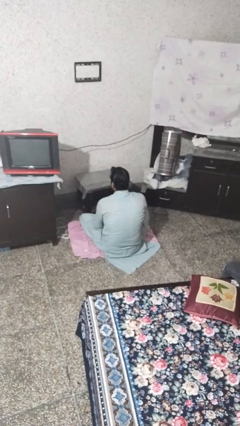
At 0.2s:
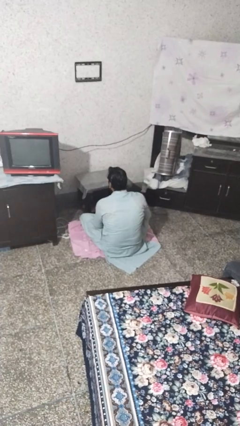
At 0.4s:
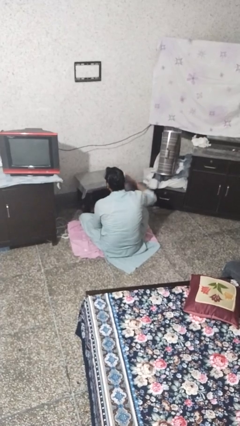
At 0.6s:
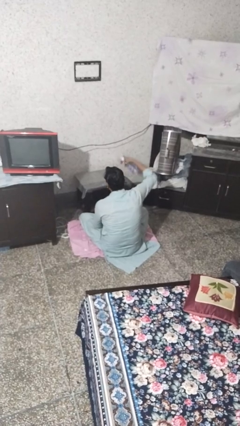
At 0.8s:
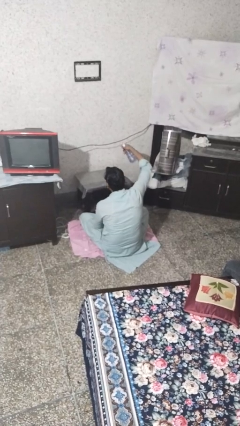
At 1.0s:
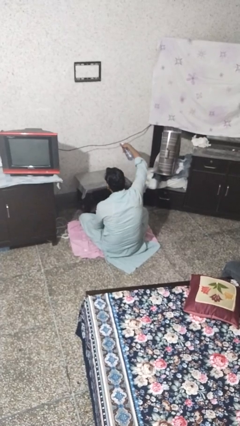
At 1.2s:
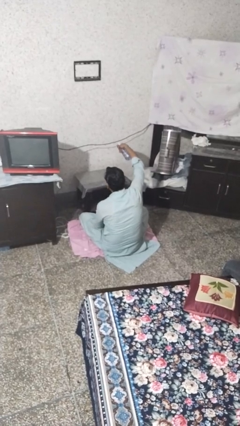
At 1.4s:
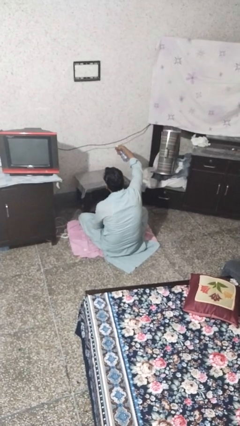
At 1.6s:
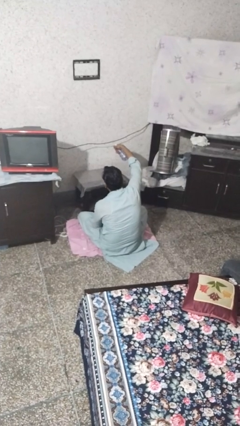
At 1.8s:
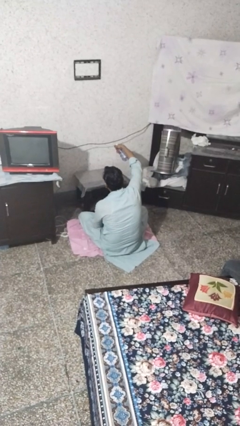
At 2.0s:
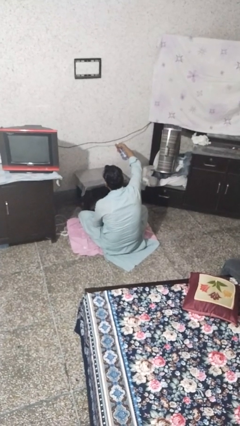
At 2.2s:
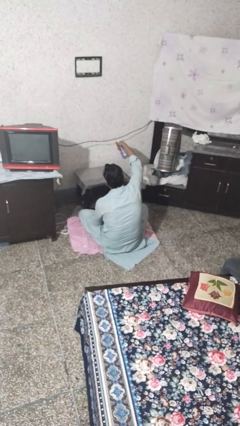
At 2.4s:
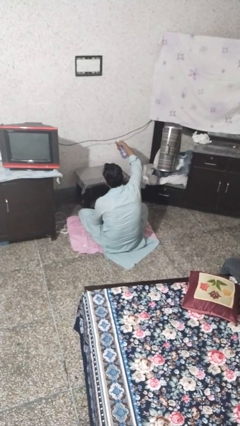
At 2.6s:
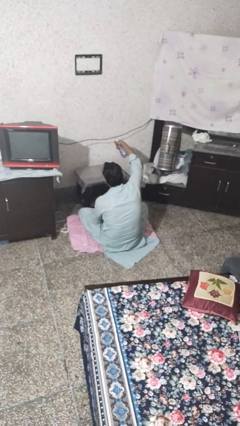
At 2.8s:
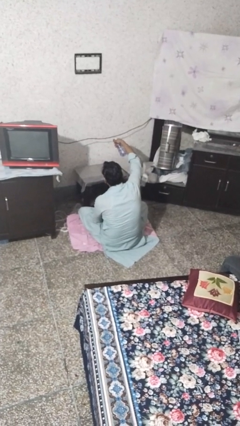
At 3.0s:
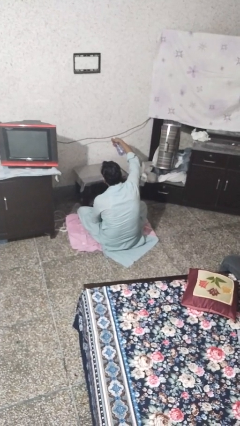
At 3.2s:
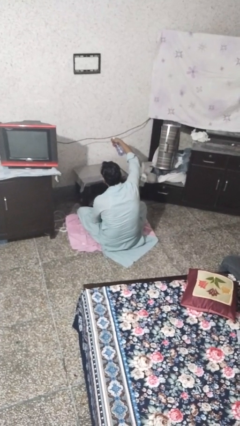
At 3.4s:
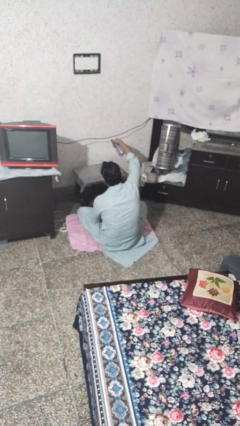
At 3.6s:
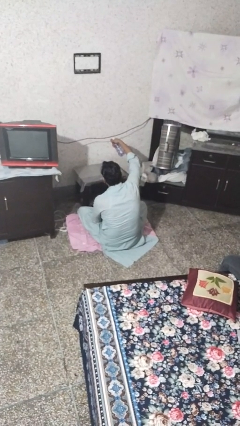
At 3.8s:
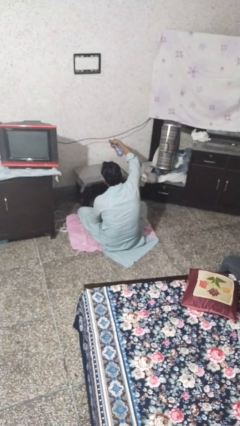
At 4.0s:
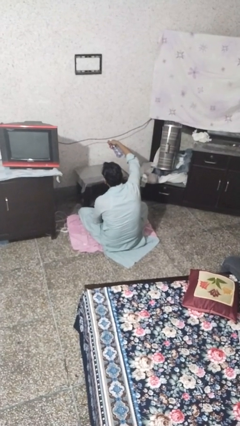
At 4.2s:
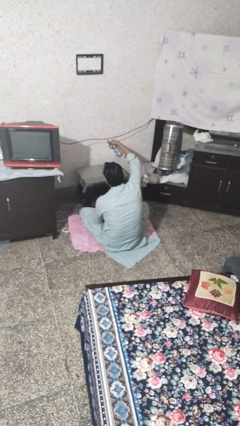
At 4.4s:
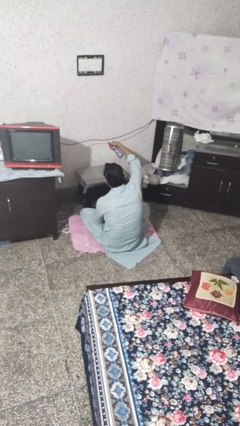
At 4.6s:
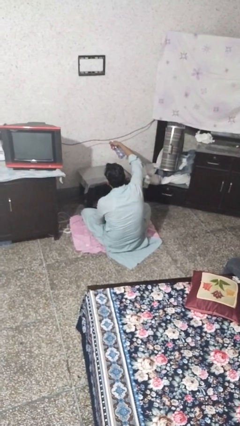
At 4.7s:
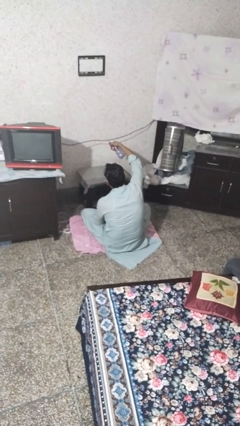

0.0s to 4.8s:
person sprays from bottle

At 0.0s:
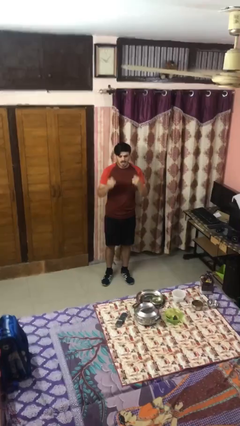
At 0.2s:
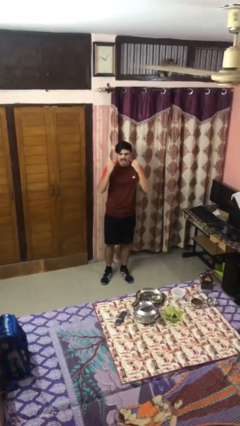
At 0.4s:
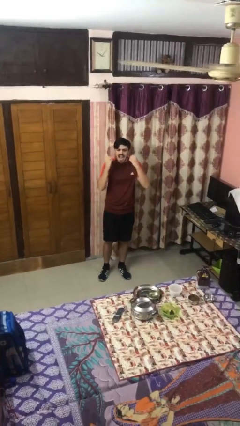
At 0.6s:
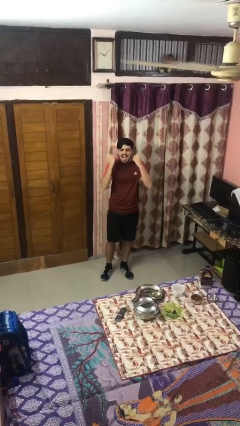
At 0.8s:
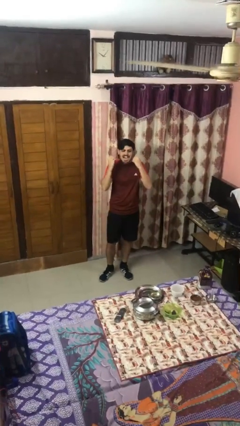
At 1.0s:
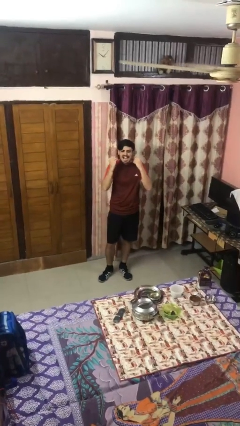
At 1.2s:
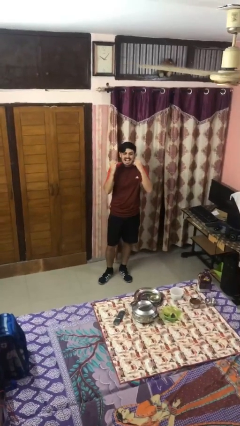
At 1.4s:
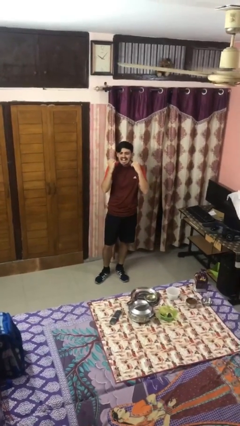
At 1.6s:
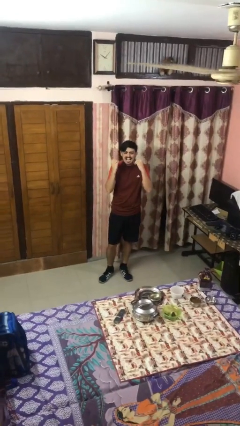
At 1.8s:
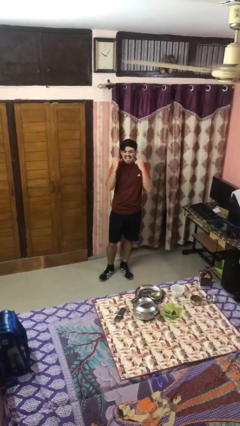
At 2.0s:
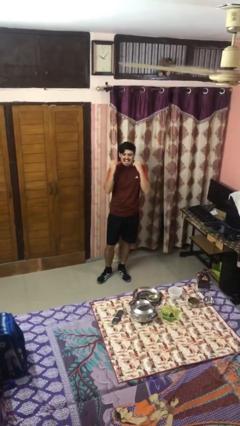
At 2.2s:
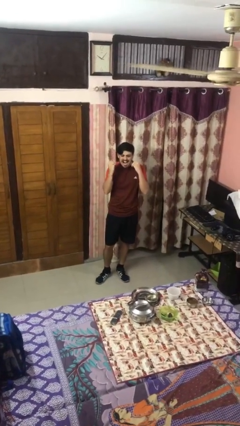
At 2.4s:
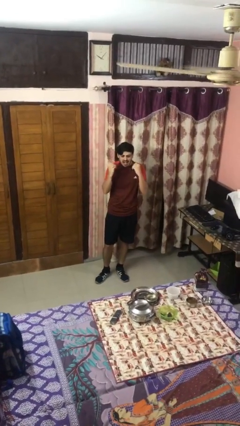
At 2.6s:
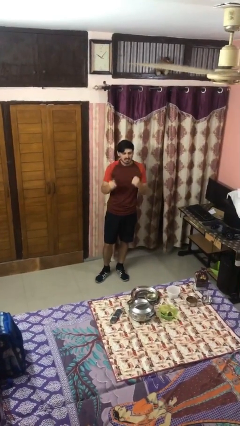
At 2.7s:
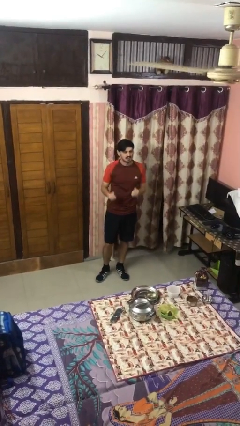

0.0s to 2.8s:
person flosses

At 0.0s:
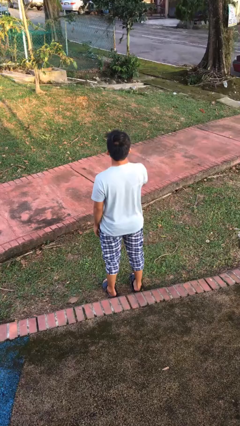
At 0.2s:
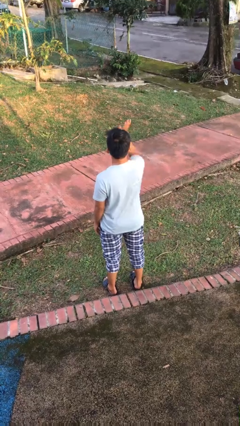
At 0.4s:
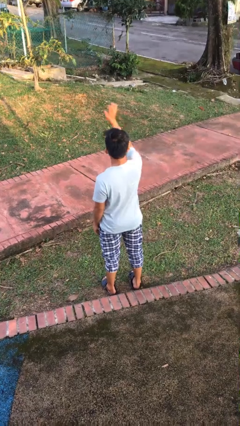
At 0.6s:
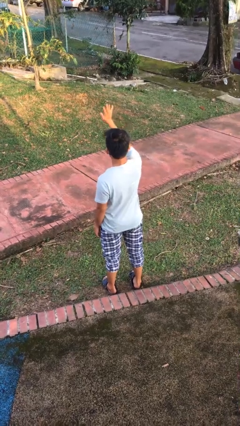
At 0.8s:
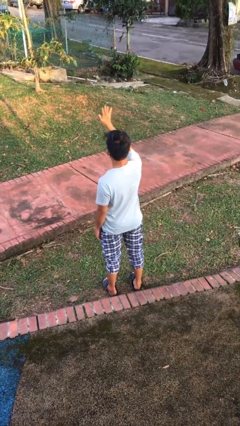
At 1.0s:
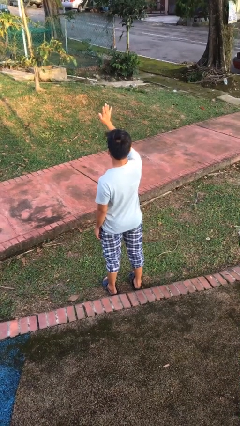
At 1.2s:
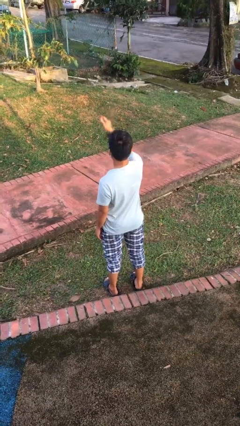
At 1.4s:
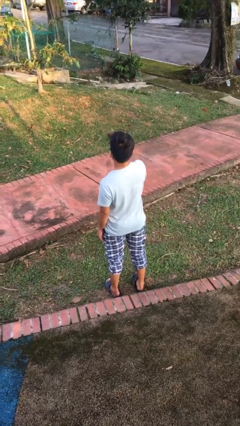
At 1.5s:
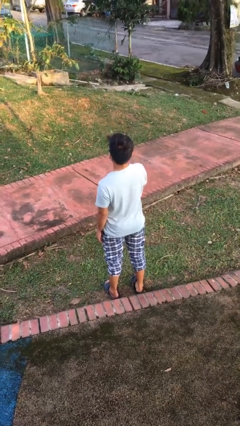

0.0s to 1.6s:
person gestures stop

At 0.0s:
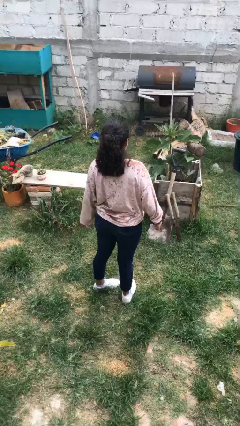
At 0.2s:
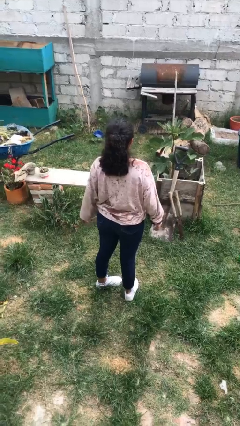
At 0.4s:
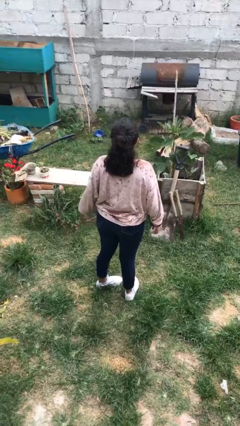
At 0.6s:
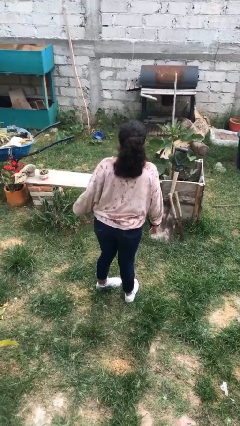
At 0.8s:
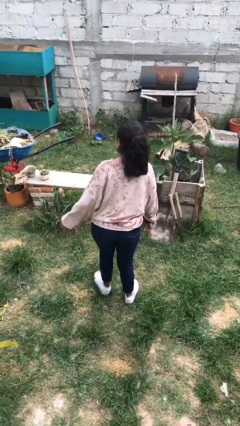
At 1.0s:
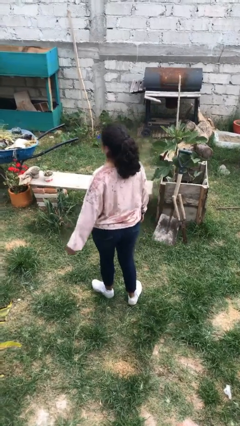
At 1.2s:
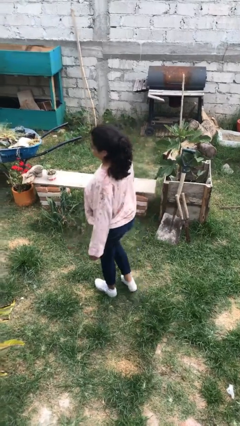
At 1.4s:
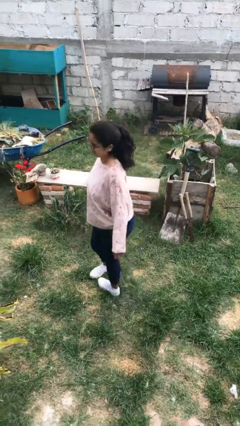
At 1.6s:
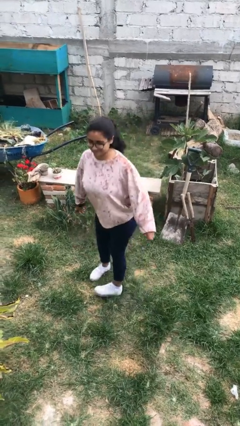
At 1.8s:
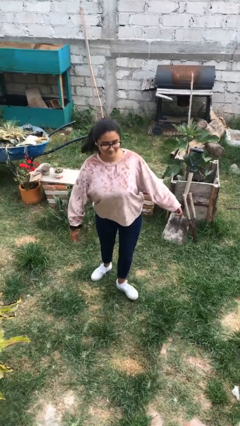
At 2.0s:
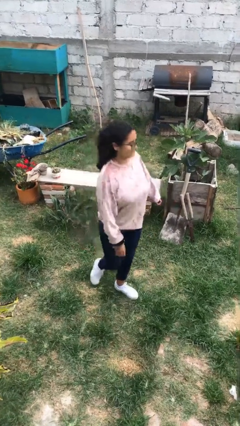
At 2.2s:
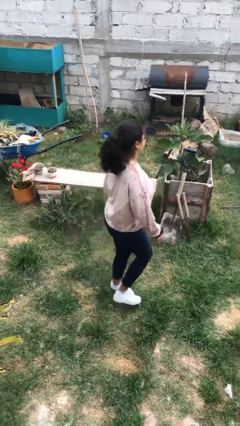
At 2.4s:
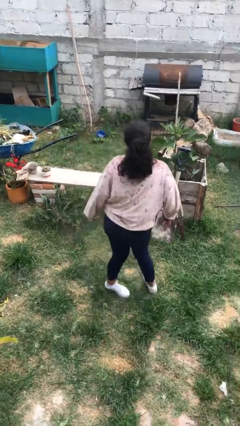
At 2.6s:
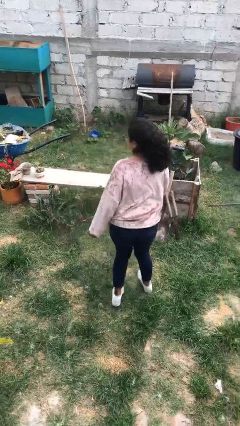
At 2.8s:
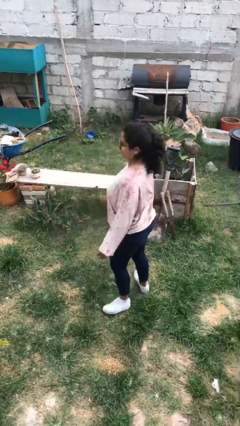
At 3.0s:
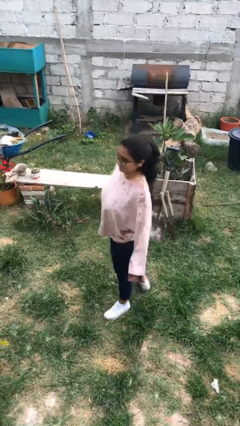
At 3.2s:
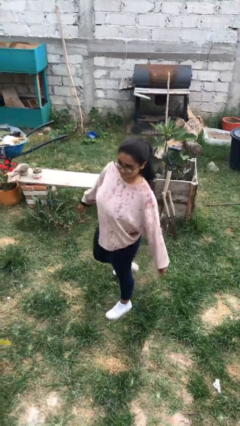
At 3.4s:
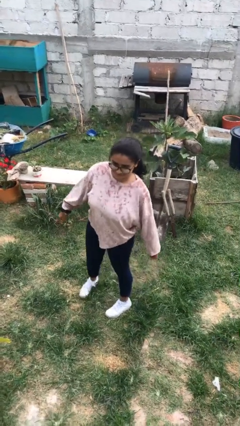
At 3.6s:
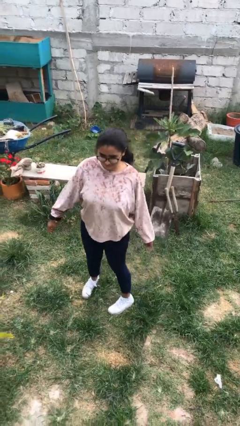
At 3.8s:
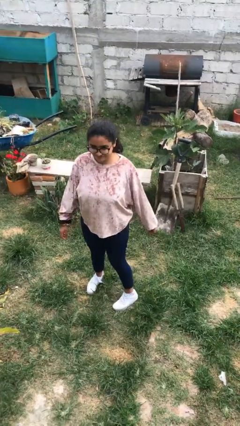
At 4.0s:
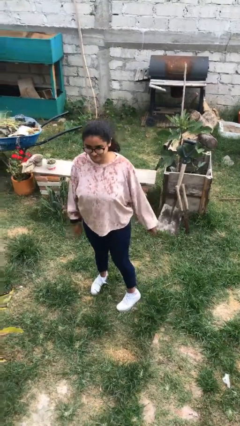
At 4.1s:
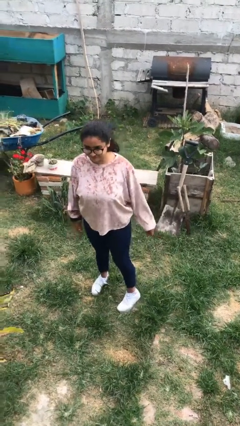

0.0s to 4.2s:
person twirls

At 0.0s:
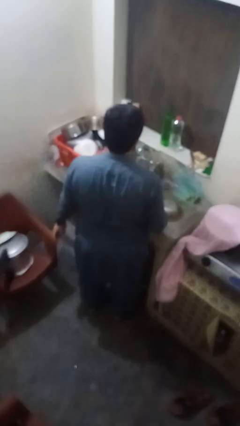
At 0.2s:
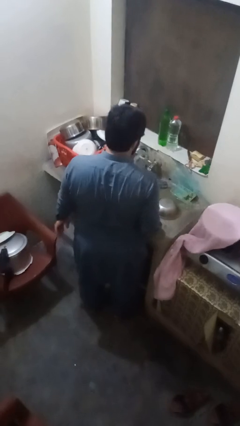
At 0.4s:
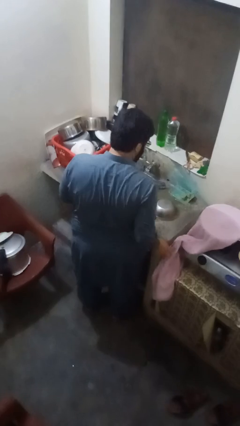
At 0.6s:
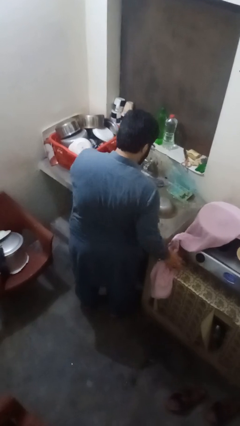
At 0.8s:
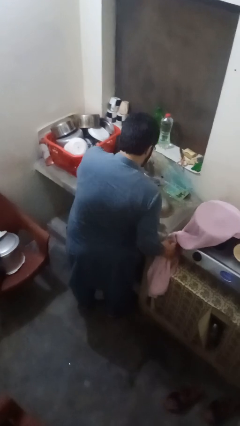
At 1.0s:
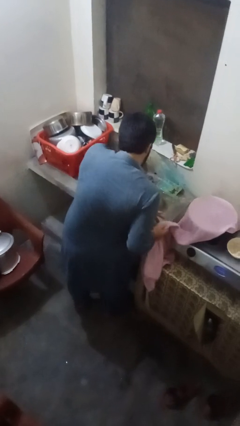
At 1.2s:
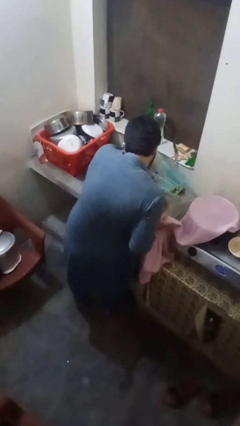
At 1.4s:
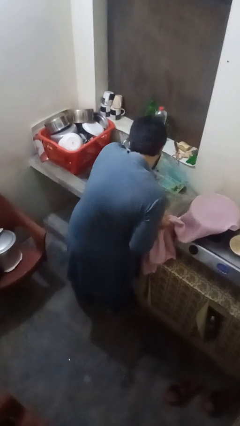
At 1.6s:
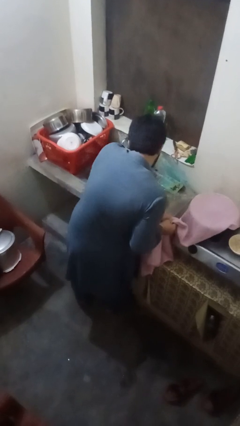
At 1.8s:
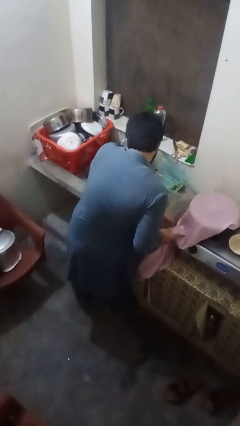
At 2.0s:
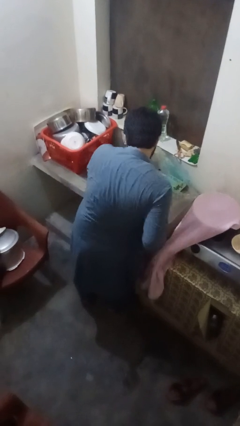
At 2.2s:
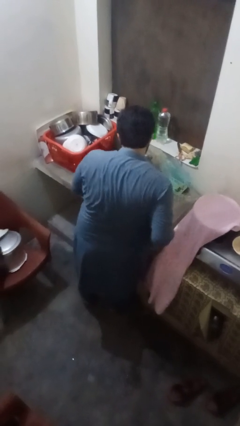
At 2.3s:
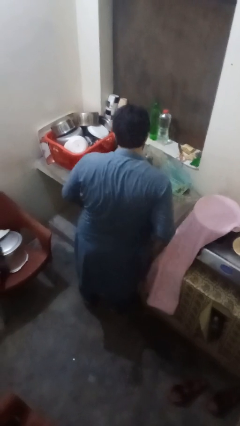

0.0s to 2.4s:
person dries hands with towel

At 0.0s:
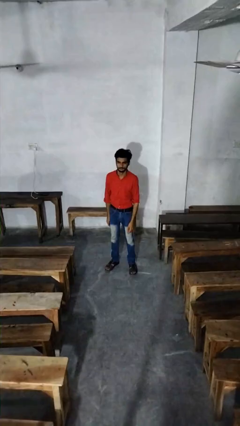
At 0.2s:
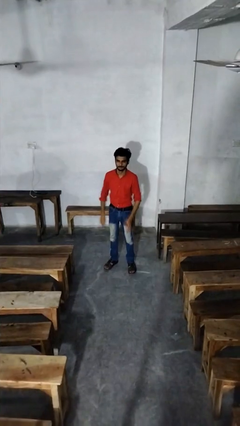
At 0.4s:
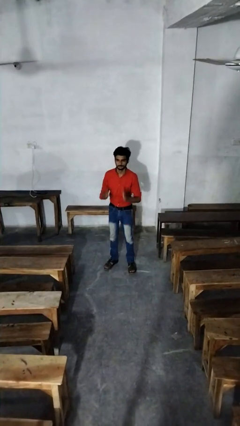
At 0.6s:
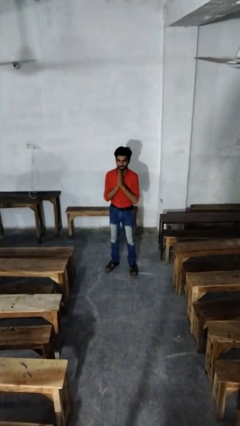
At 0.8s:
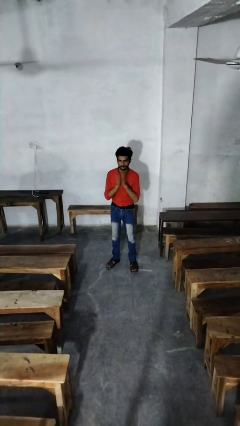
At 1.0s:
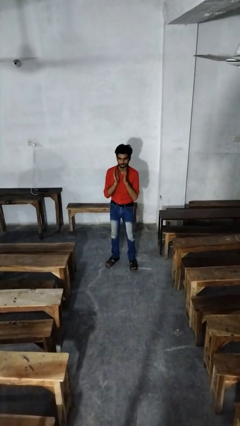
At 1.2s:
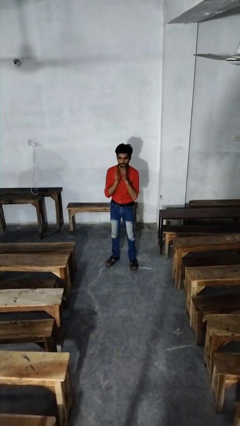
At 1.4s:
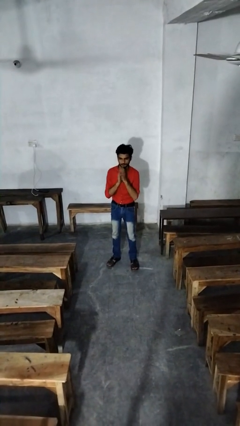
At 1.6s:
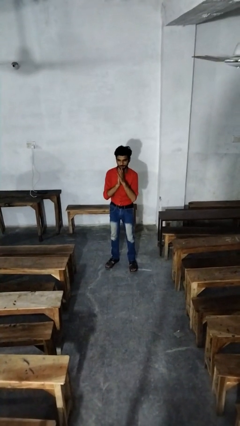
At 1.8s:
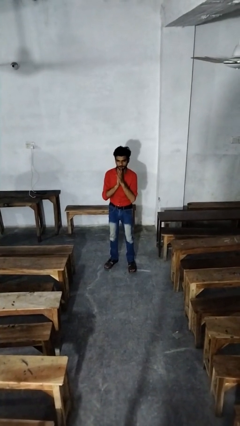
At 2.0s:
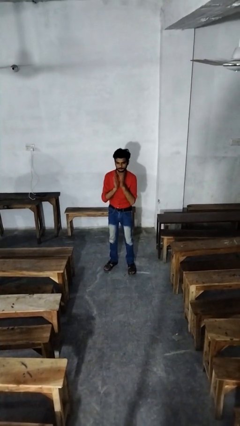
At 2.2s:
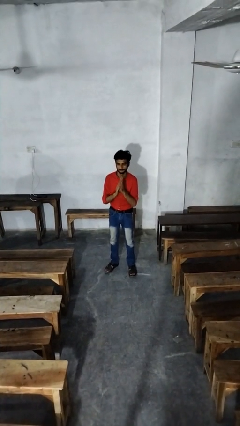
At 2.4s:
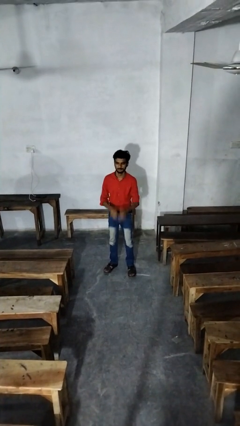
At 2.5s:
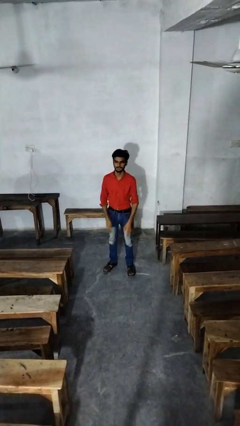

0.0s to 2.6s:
person claps hands
